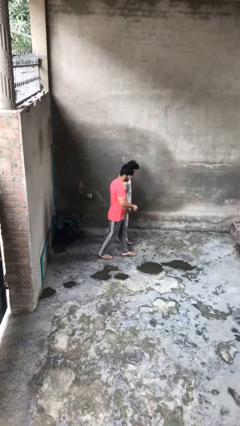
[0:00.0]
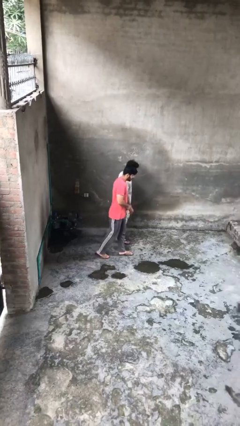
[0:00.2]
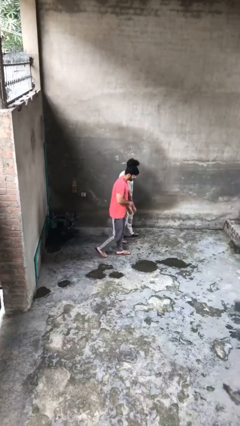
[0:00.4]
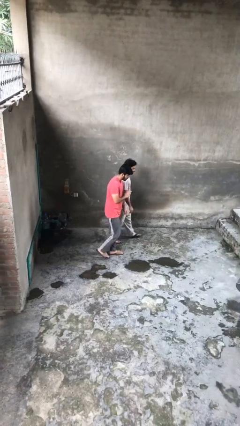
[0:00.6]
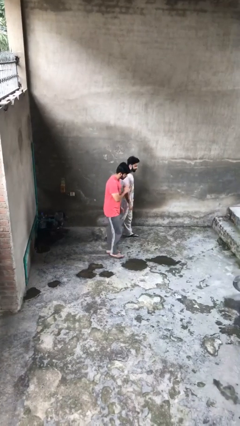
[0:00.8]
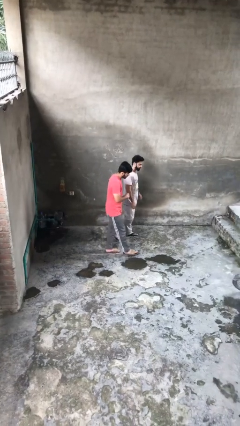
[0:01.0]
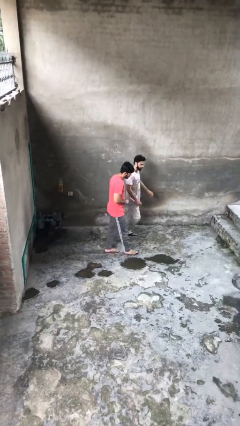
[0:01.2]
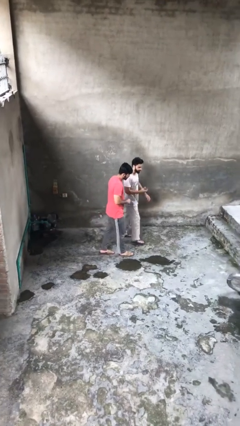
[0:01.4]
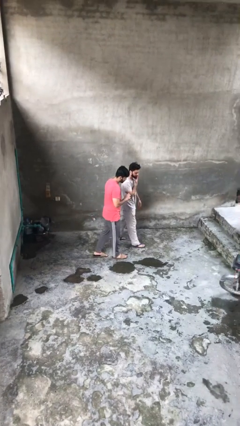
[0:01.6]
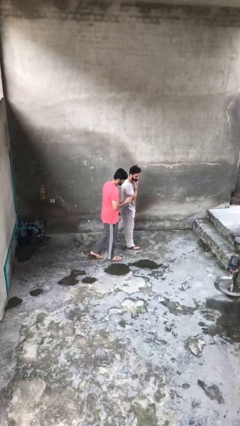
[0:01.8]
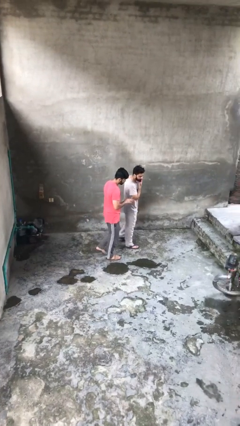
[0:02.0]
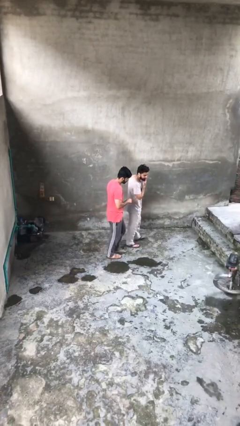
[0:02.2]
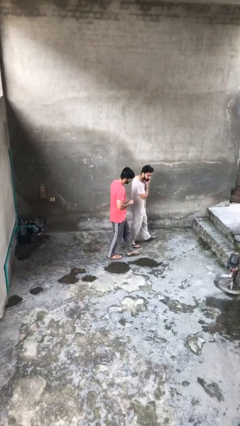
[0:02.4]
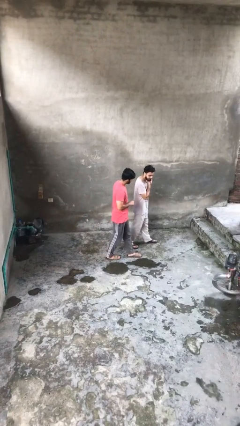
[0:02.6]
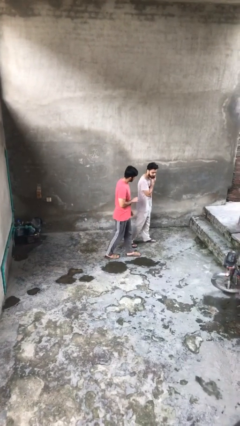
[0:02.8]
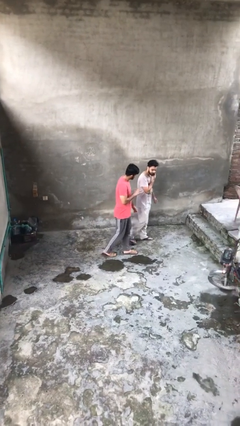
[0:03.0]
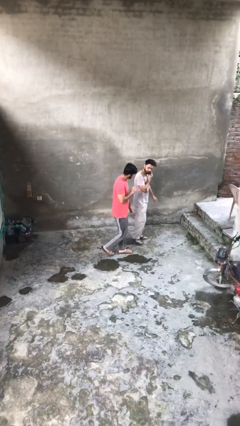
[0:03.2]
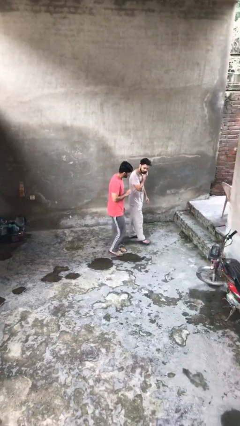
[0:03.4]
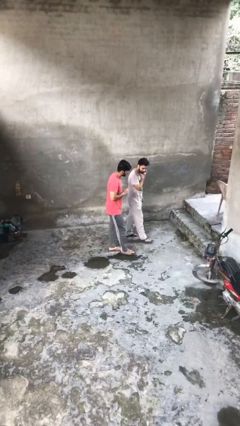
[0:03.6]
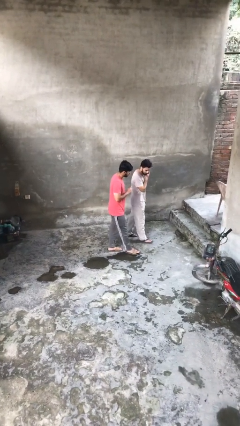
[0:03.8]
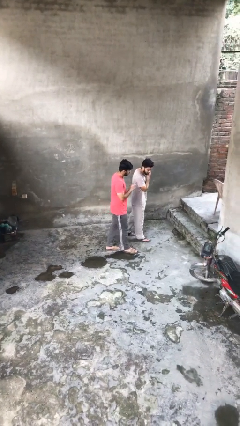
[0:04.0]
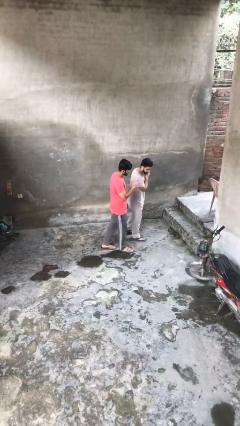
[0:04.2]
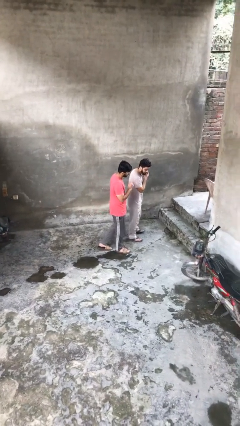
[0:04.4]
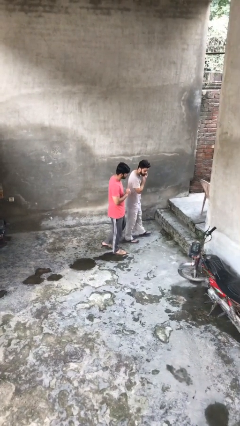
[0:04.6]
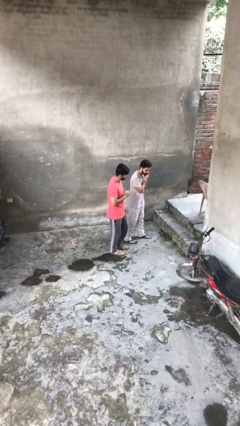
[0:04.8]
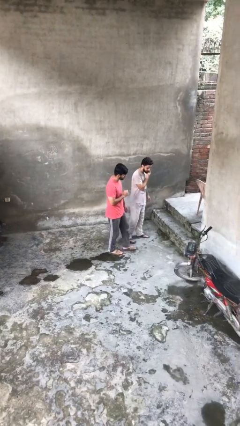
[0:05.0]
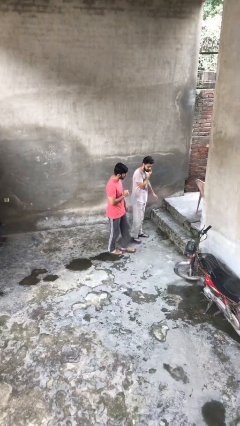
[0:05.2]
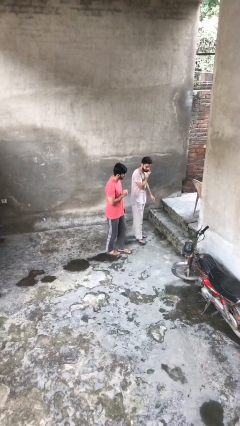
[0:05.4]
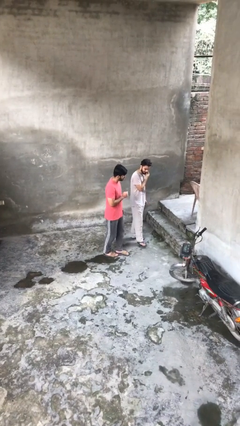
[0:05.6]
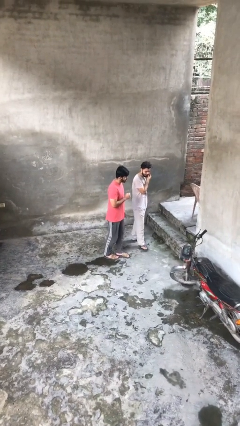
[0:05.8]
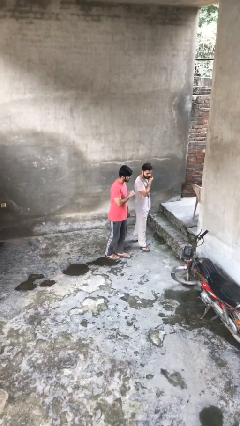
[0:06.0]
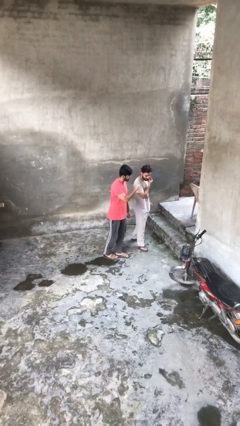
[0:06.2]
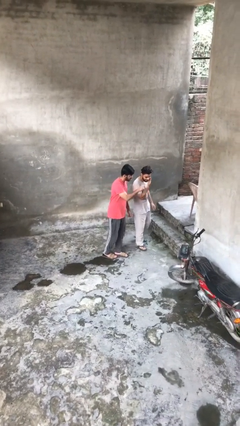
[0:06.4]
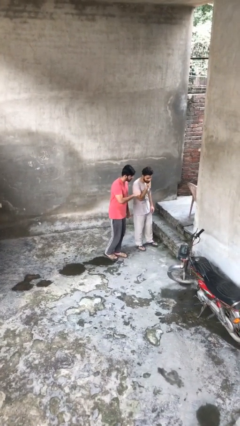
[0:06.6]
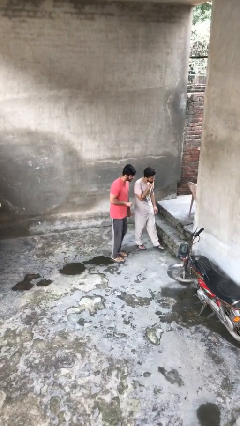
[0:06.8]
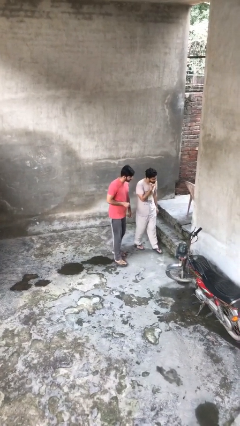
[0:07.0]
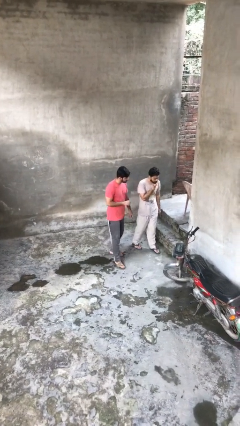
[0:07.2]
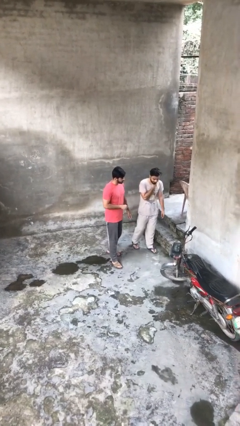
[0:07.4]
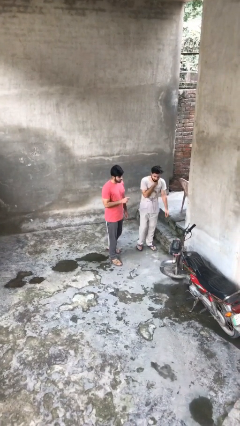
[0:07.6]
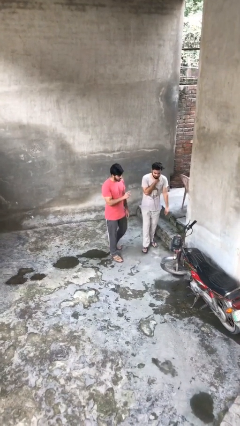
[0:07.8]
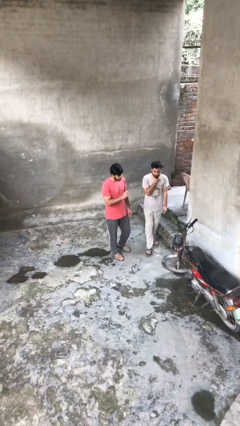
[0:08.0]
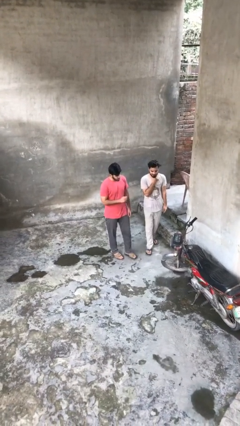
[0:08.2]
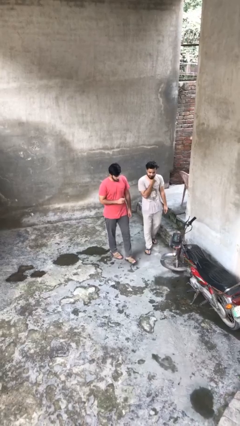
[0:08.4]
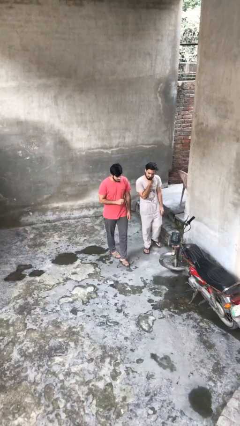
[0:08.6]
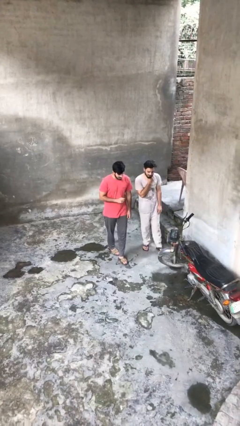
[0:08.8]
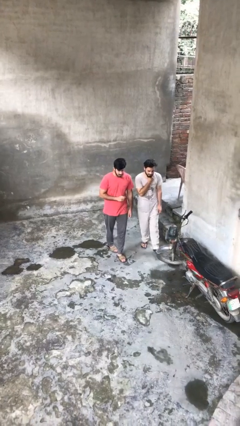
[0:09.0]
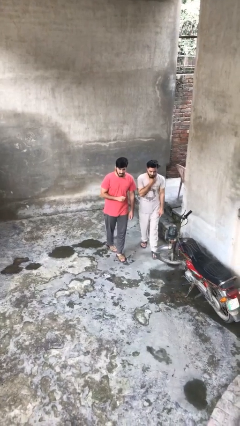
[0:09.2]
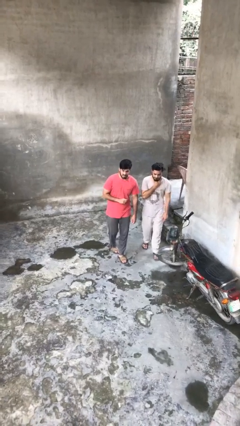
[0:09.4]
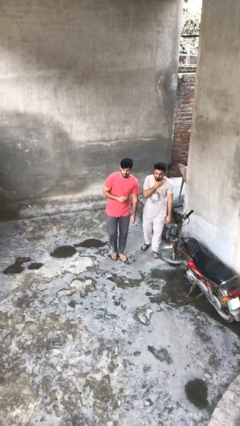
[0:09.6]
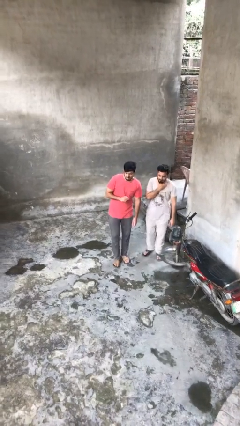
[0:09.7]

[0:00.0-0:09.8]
person talks to person

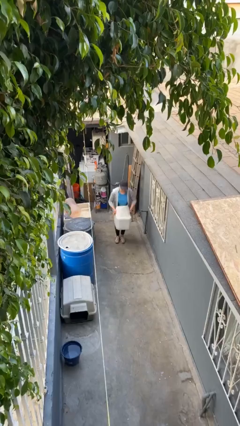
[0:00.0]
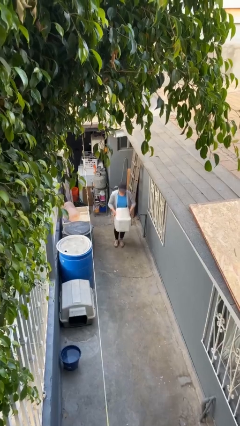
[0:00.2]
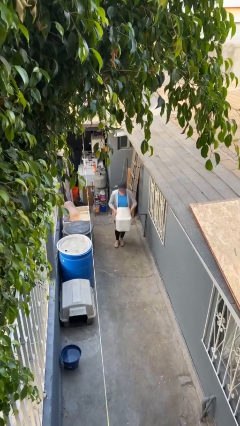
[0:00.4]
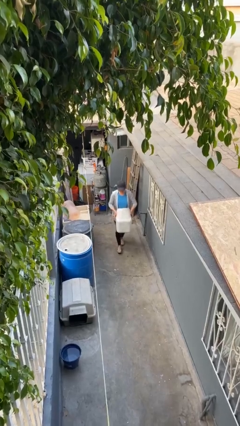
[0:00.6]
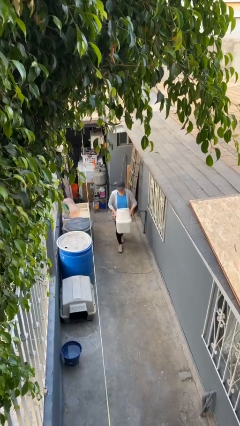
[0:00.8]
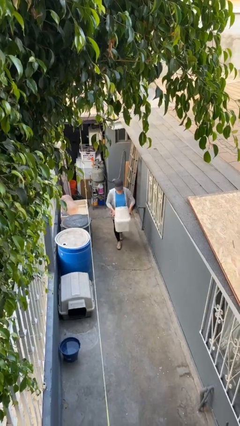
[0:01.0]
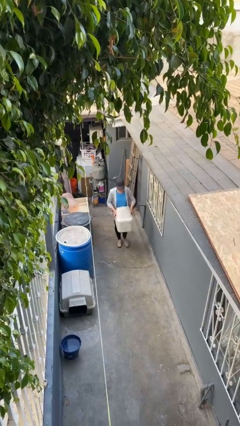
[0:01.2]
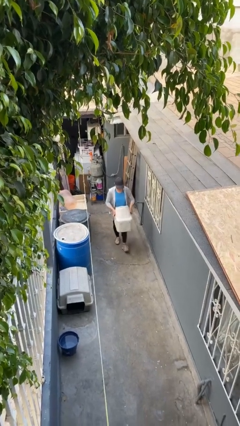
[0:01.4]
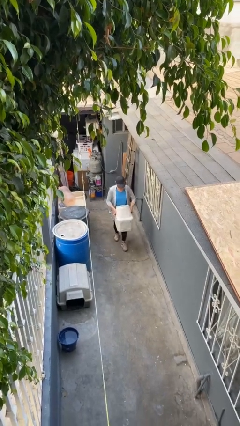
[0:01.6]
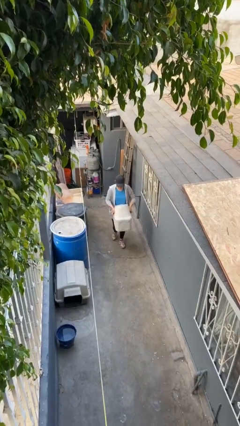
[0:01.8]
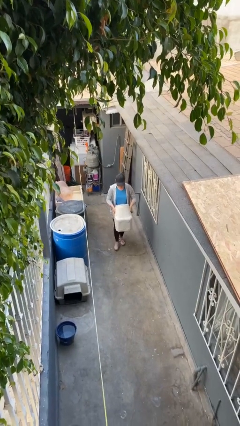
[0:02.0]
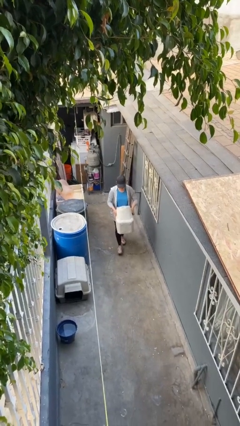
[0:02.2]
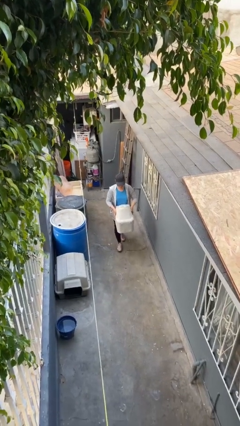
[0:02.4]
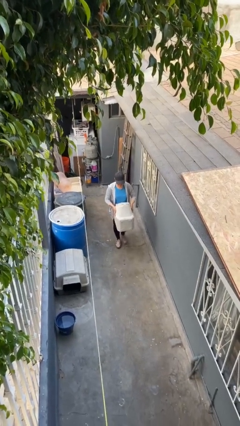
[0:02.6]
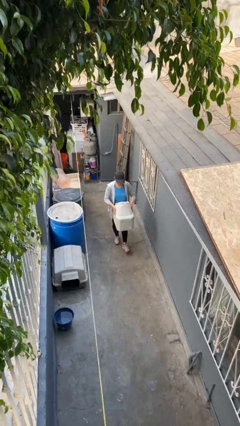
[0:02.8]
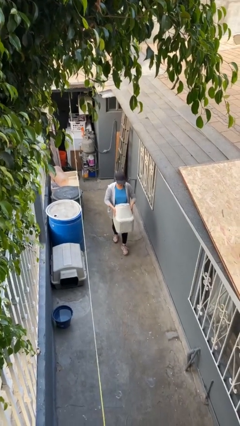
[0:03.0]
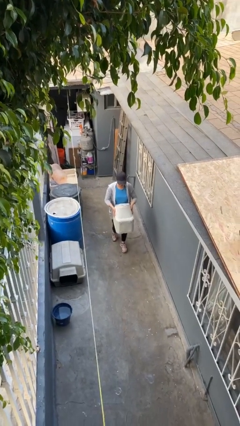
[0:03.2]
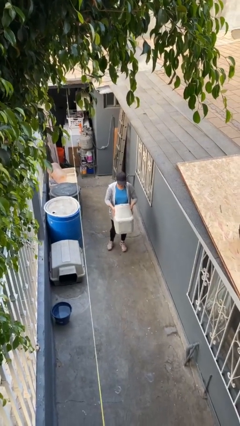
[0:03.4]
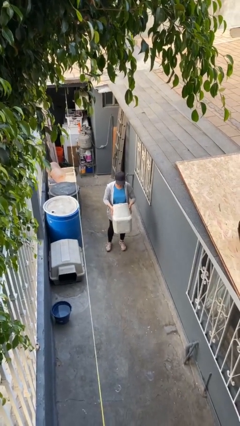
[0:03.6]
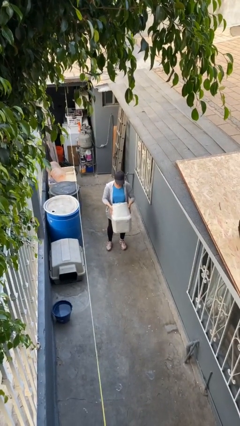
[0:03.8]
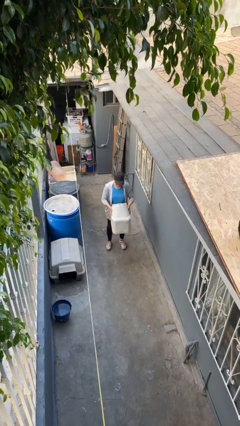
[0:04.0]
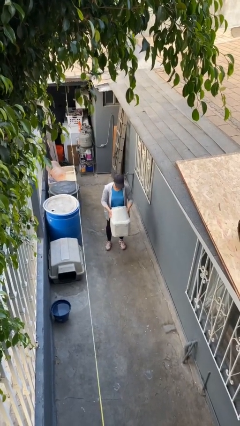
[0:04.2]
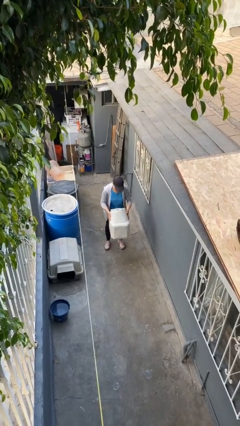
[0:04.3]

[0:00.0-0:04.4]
person carries heavy object

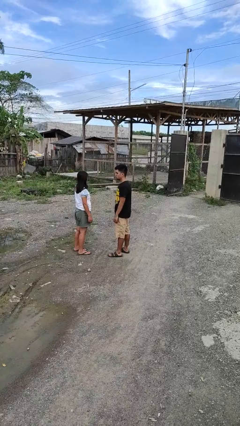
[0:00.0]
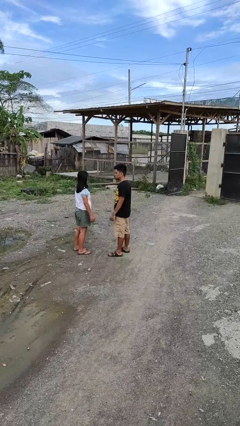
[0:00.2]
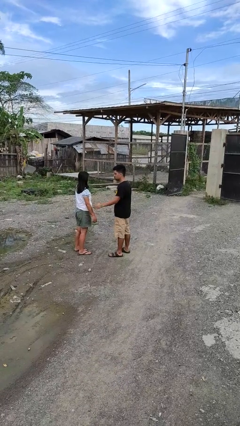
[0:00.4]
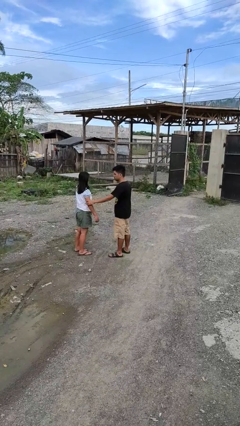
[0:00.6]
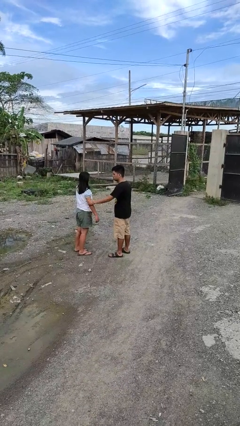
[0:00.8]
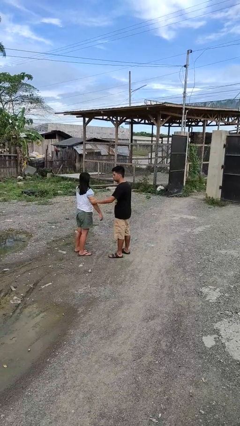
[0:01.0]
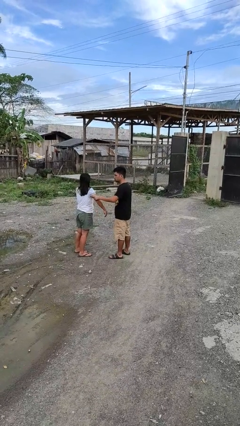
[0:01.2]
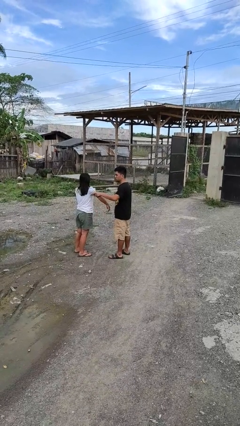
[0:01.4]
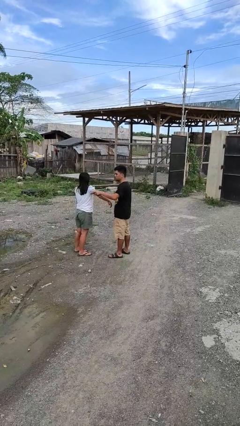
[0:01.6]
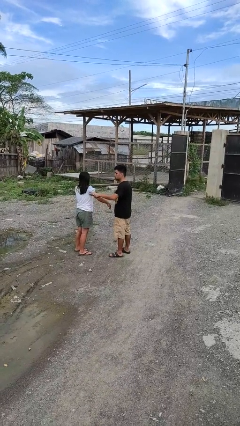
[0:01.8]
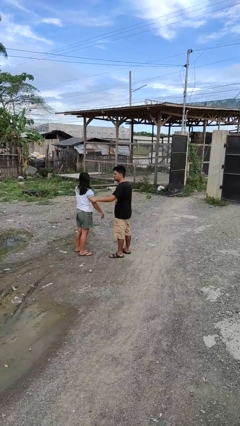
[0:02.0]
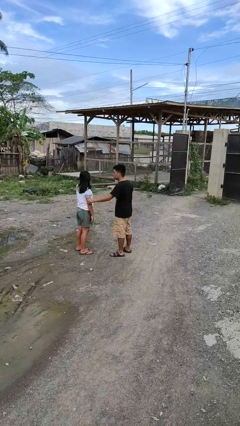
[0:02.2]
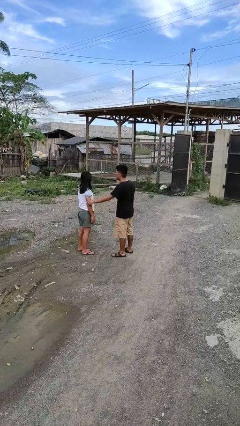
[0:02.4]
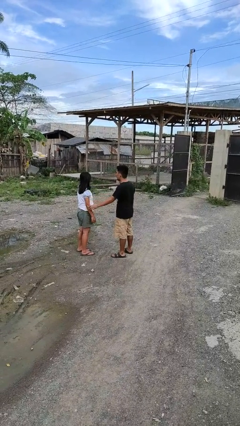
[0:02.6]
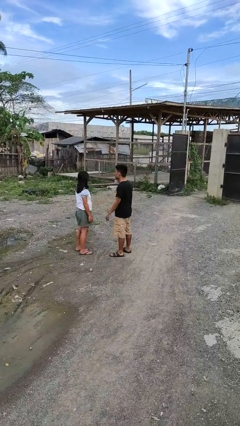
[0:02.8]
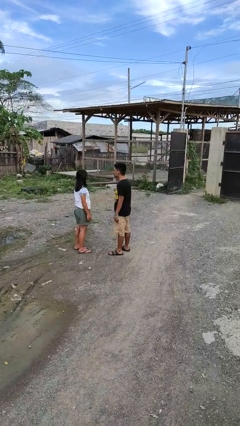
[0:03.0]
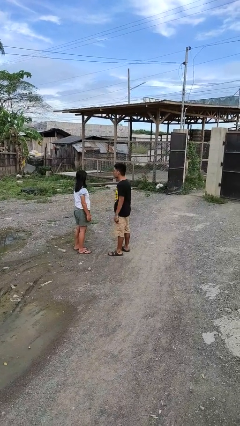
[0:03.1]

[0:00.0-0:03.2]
person grabs person by bicep

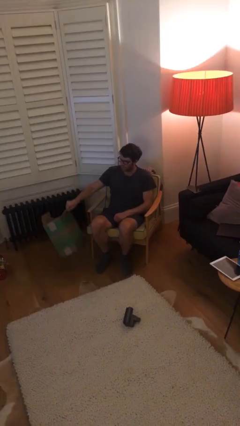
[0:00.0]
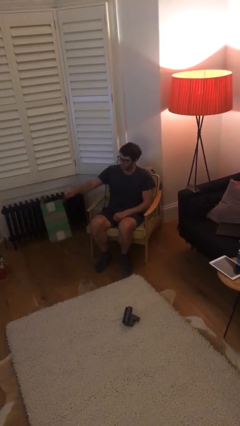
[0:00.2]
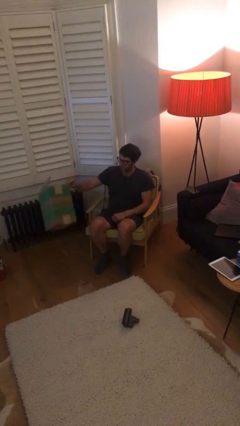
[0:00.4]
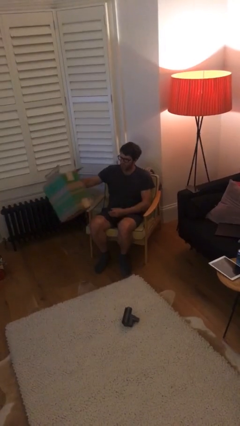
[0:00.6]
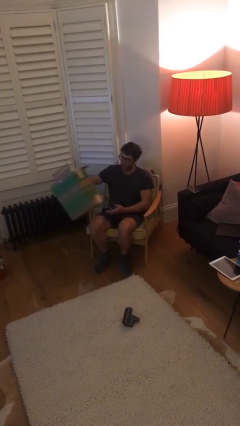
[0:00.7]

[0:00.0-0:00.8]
person picks up object from floor
